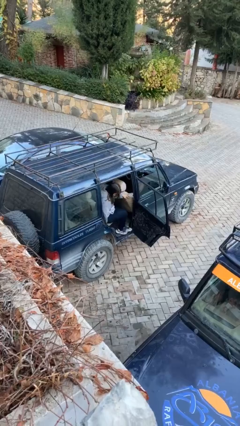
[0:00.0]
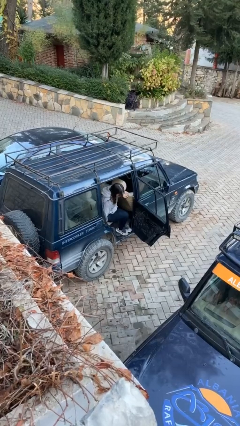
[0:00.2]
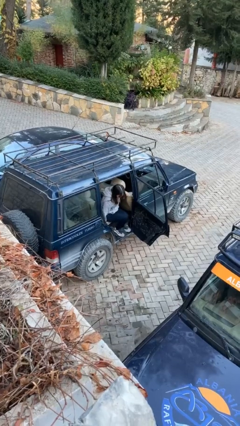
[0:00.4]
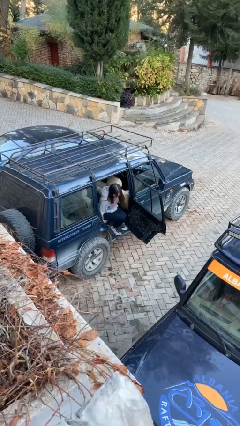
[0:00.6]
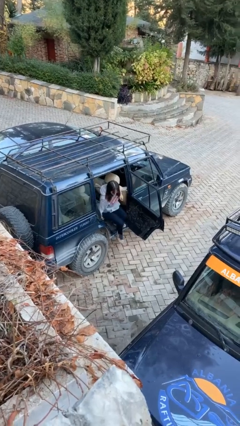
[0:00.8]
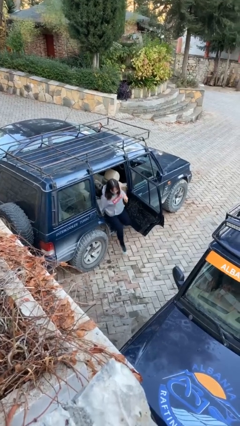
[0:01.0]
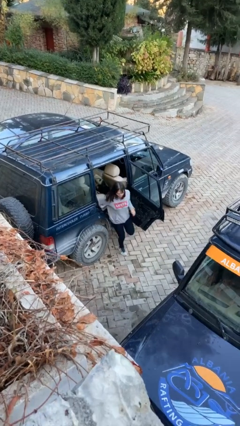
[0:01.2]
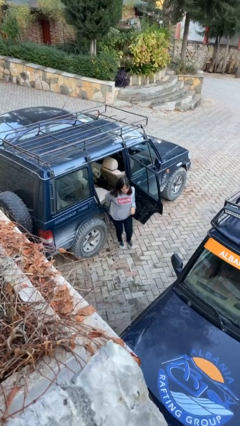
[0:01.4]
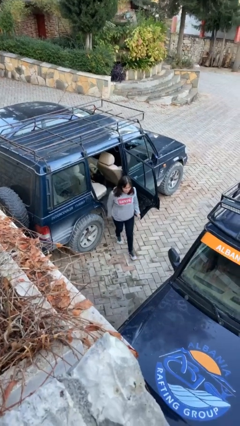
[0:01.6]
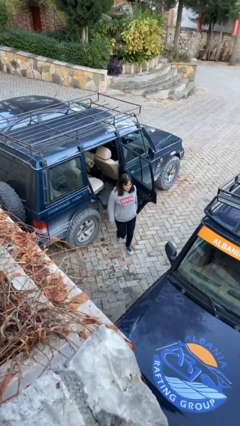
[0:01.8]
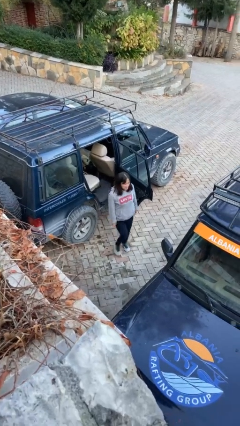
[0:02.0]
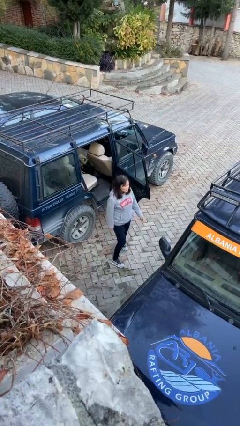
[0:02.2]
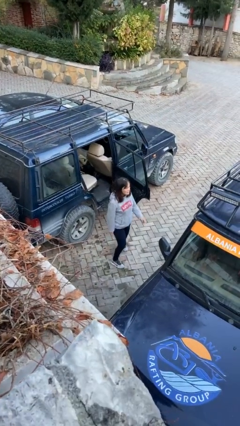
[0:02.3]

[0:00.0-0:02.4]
person exits car

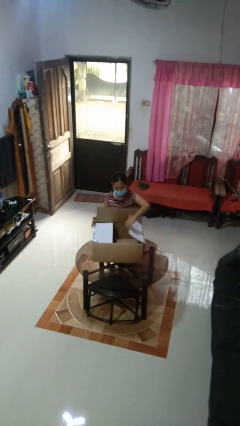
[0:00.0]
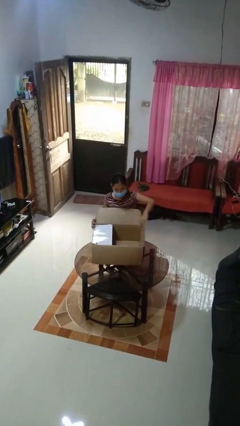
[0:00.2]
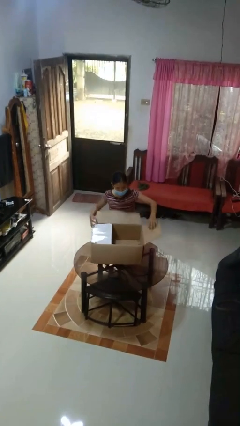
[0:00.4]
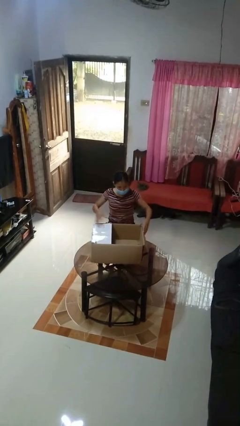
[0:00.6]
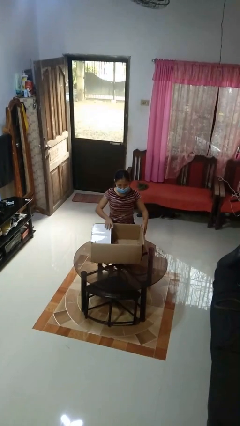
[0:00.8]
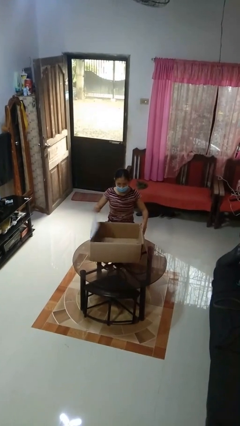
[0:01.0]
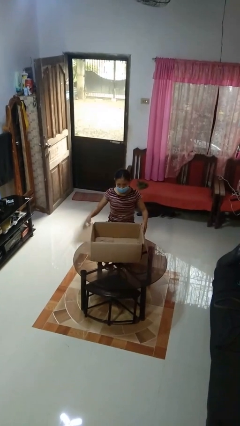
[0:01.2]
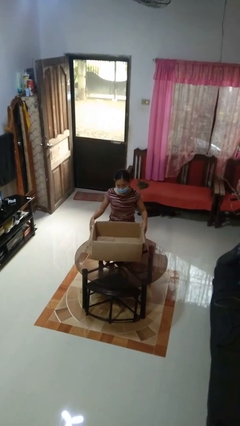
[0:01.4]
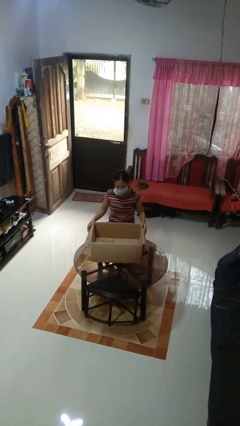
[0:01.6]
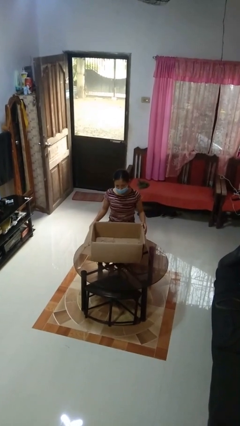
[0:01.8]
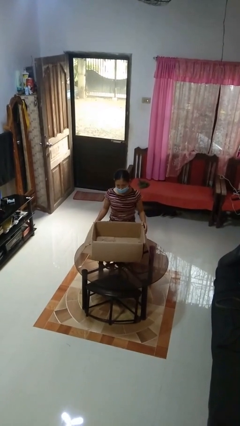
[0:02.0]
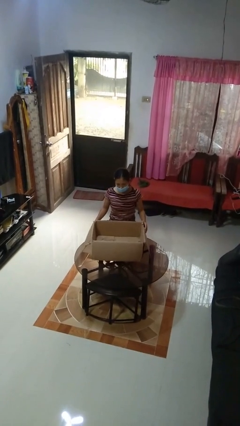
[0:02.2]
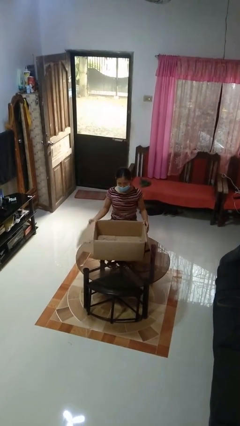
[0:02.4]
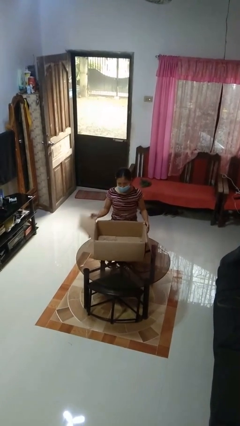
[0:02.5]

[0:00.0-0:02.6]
person opens box

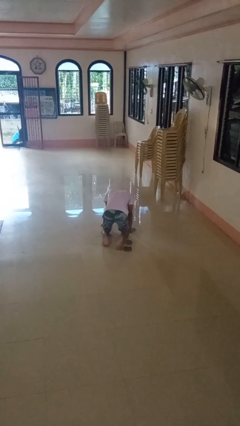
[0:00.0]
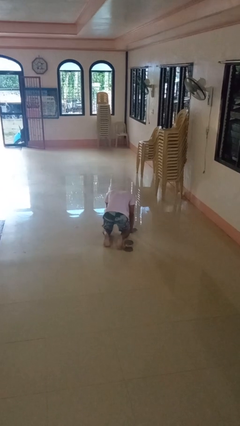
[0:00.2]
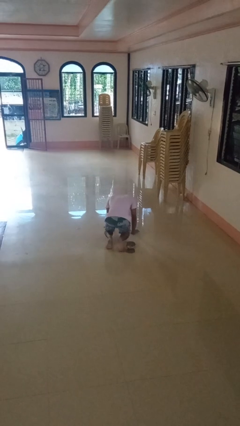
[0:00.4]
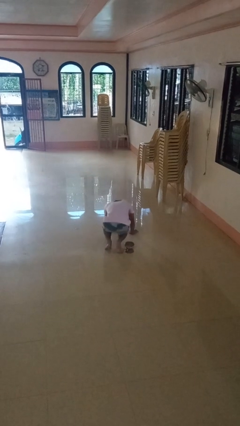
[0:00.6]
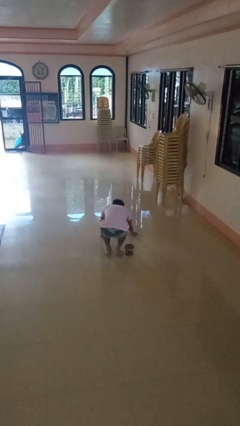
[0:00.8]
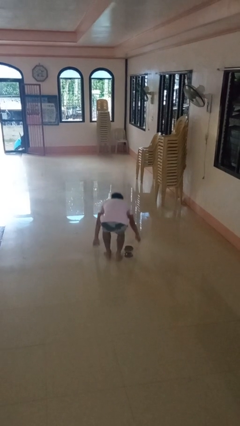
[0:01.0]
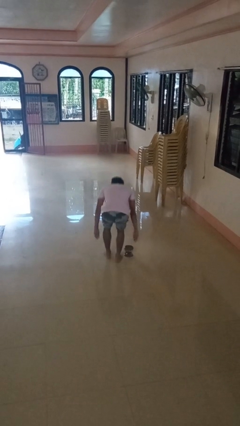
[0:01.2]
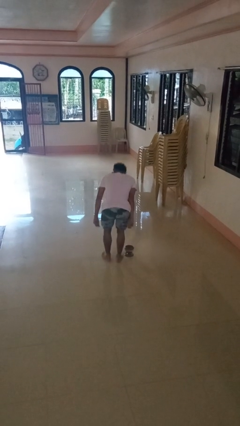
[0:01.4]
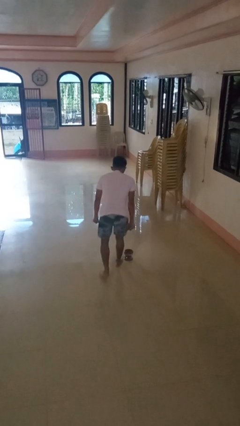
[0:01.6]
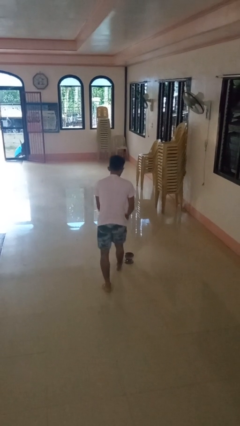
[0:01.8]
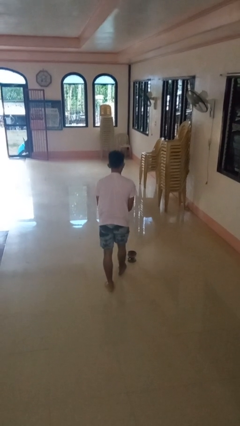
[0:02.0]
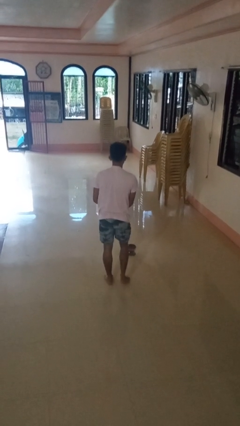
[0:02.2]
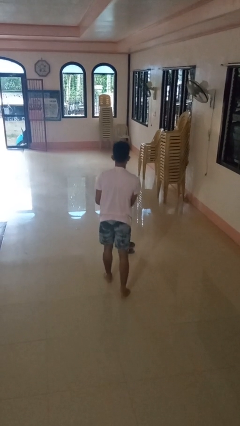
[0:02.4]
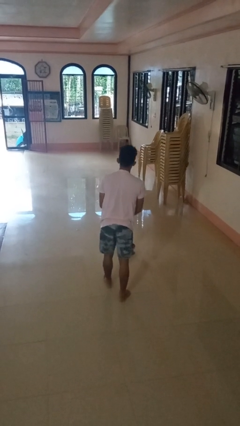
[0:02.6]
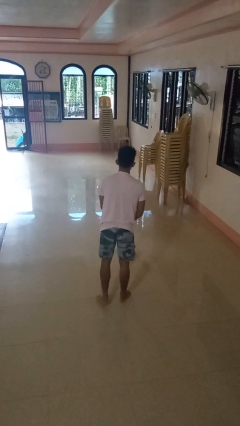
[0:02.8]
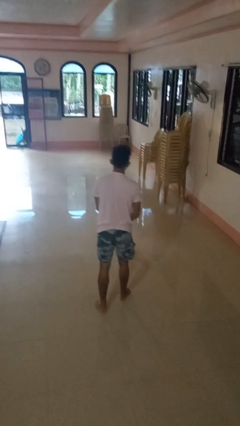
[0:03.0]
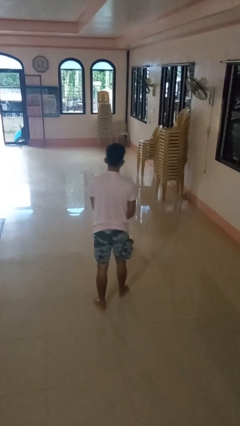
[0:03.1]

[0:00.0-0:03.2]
person stands up from floor

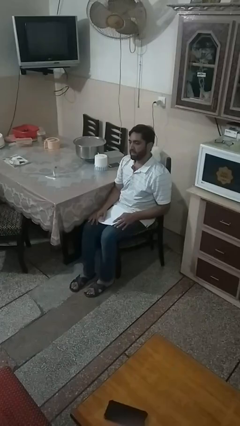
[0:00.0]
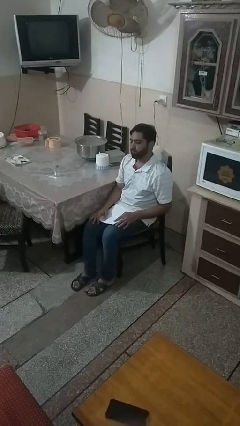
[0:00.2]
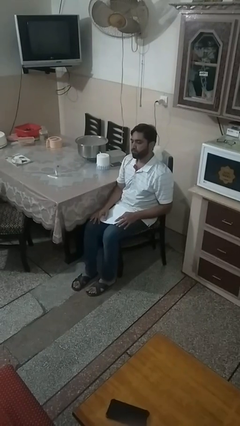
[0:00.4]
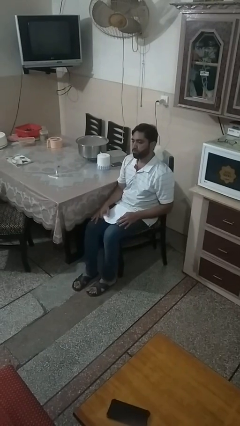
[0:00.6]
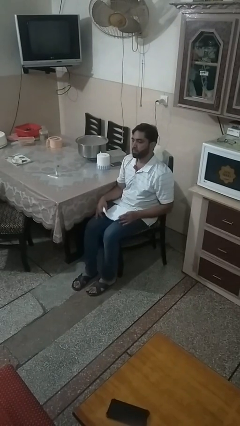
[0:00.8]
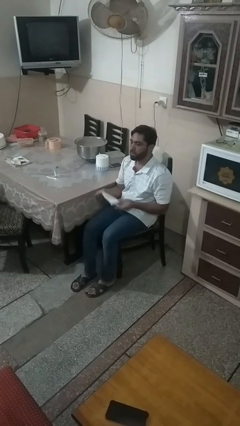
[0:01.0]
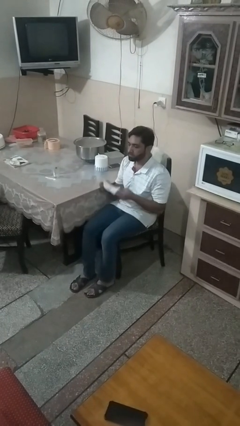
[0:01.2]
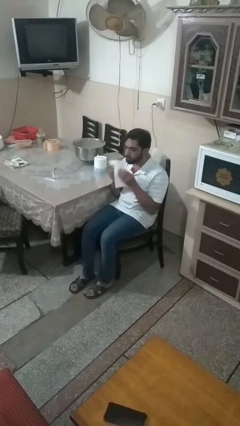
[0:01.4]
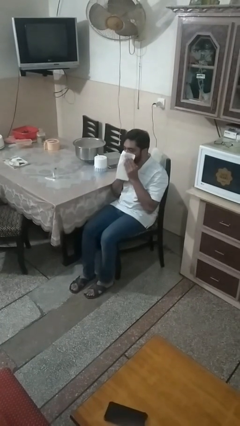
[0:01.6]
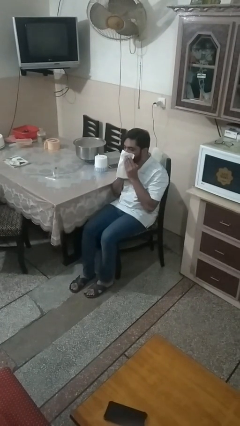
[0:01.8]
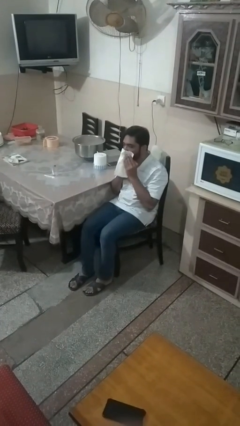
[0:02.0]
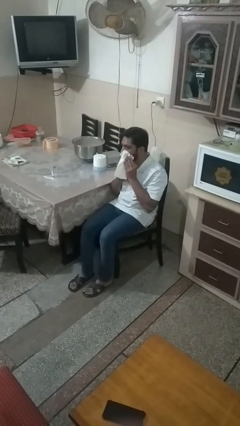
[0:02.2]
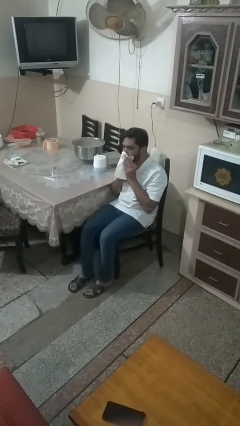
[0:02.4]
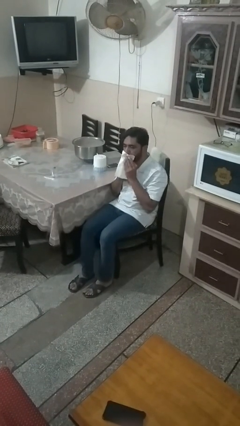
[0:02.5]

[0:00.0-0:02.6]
person wipes mouth with napkin

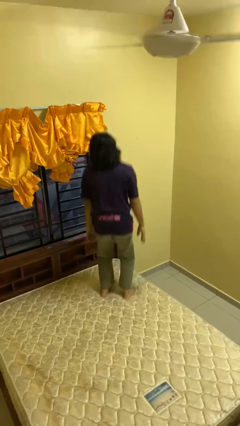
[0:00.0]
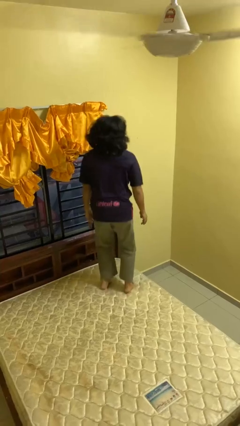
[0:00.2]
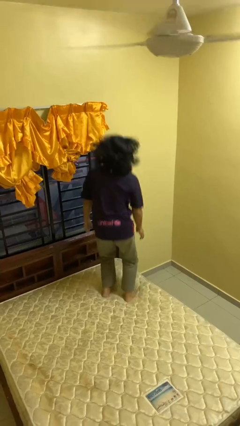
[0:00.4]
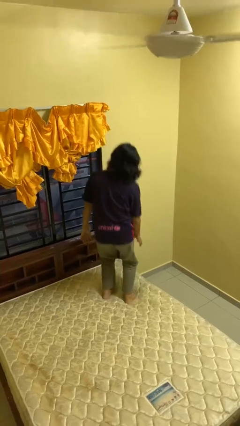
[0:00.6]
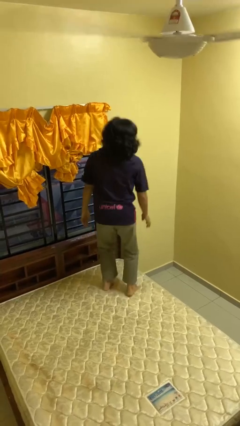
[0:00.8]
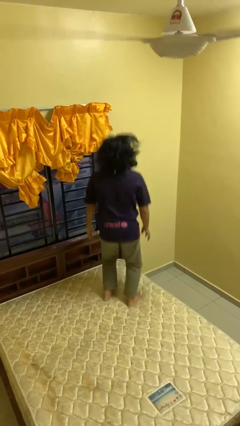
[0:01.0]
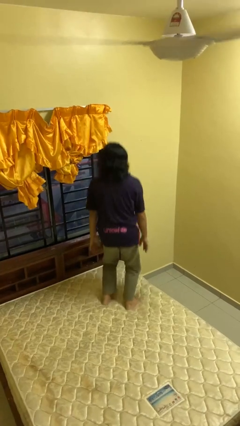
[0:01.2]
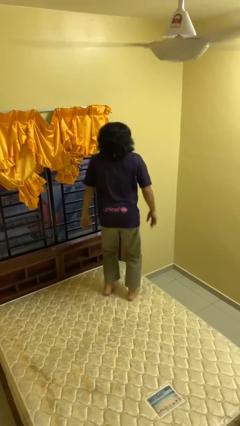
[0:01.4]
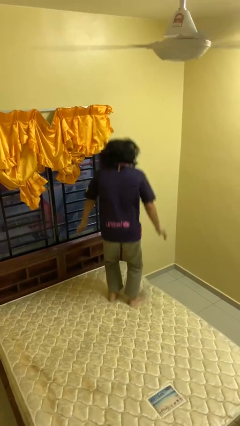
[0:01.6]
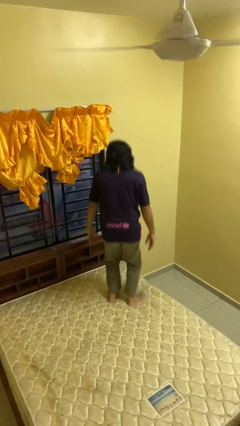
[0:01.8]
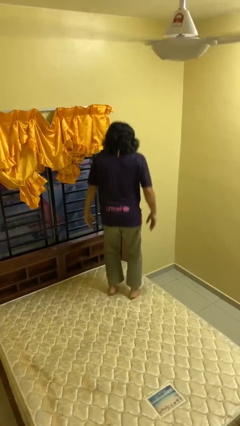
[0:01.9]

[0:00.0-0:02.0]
person jumps on bed

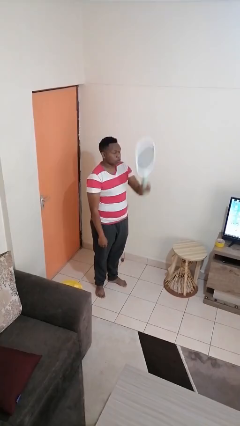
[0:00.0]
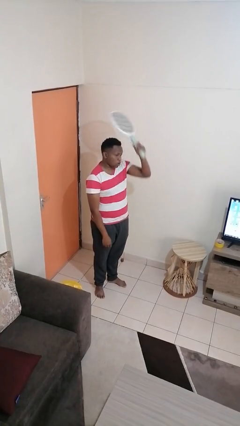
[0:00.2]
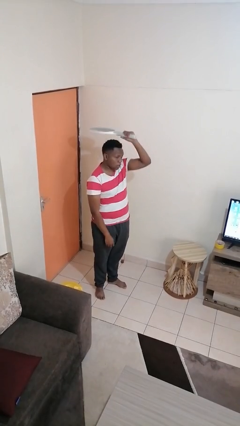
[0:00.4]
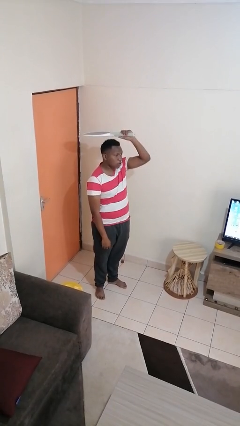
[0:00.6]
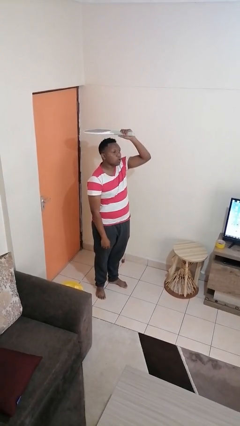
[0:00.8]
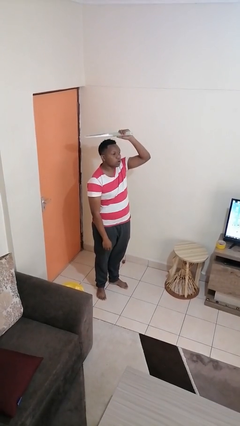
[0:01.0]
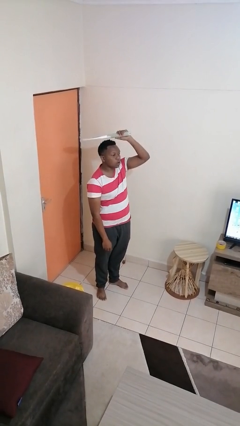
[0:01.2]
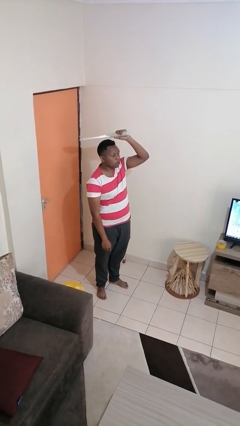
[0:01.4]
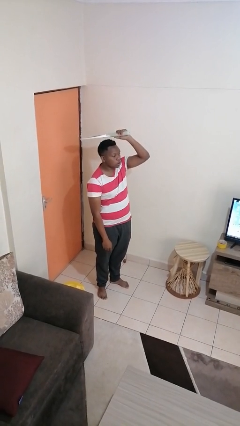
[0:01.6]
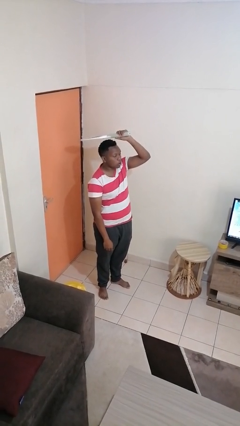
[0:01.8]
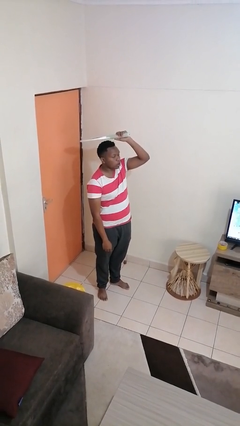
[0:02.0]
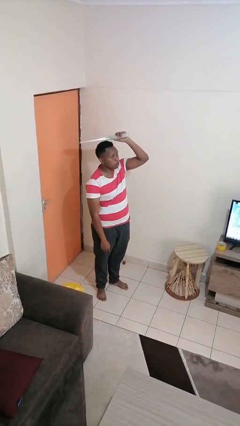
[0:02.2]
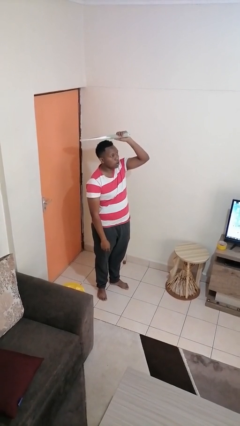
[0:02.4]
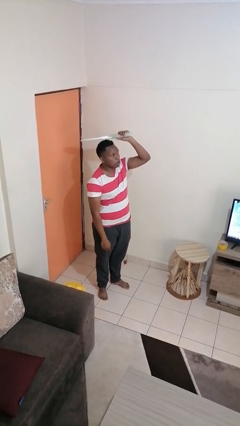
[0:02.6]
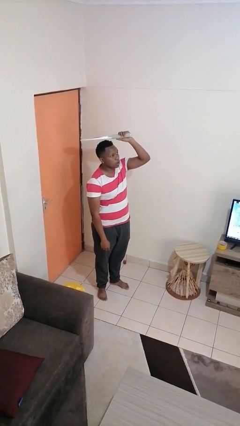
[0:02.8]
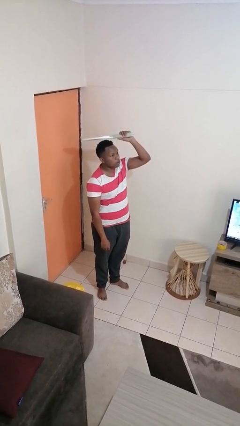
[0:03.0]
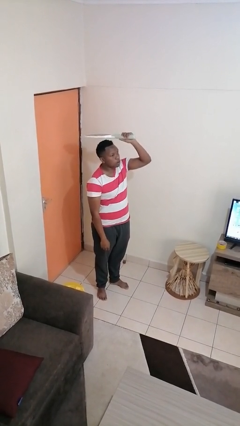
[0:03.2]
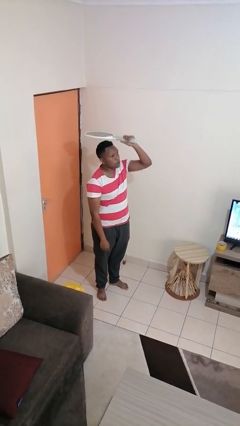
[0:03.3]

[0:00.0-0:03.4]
person holds object above head

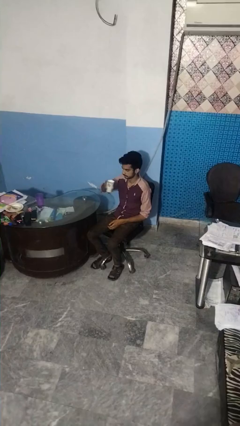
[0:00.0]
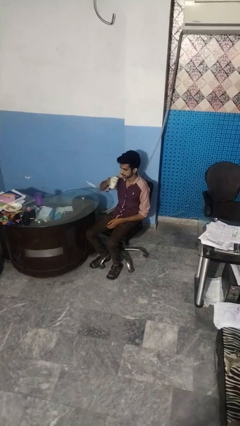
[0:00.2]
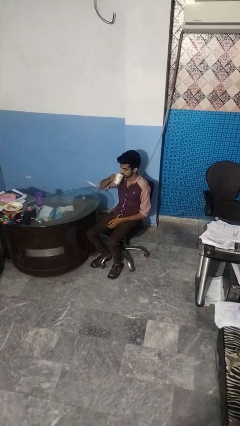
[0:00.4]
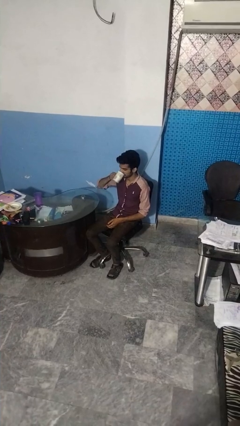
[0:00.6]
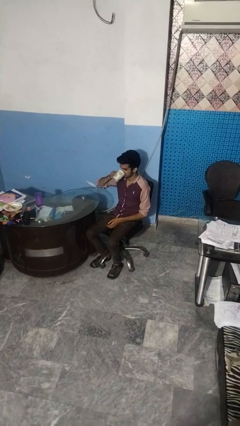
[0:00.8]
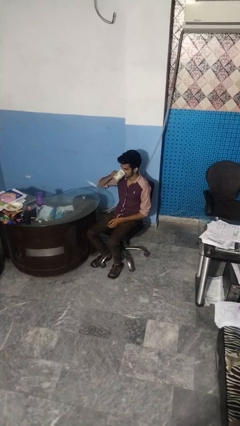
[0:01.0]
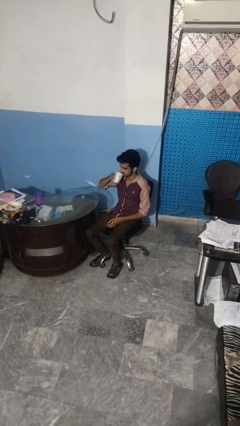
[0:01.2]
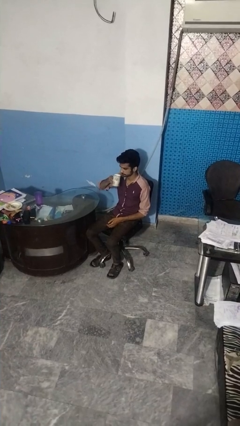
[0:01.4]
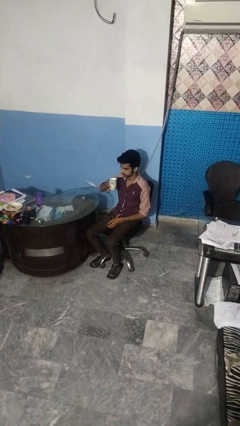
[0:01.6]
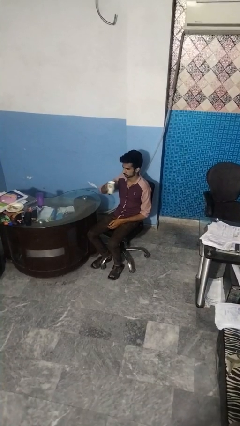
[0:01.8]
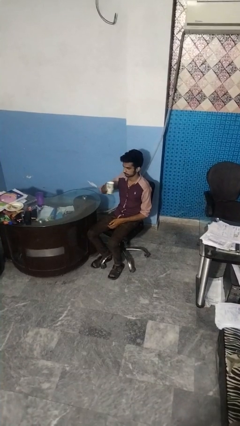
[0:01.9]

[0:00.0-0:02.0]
person drinks from mug
